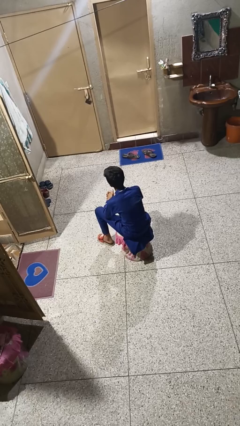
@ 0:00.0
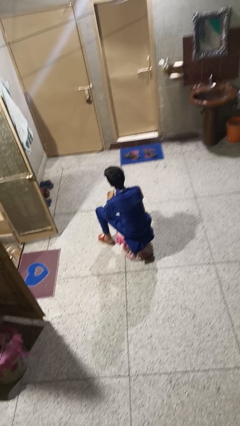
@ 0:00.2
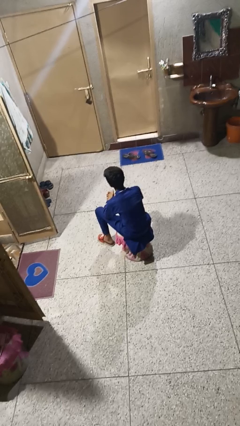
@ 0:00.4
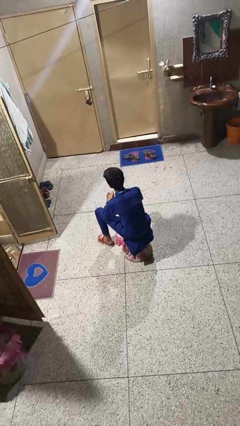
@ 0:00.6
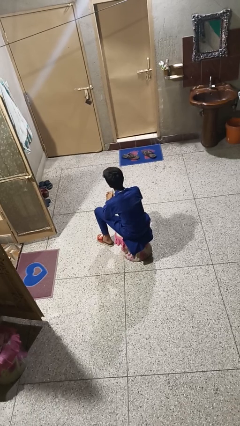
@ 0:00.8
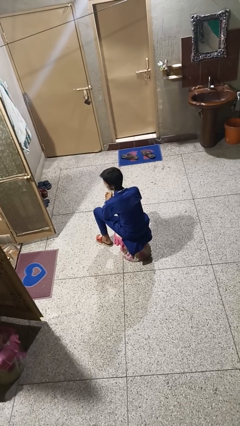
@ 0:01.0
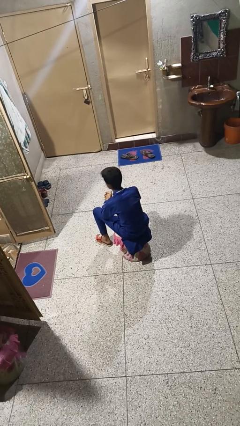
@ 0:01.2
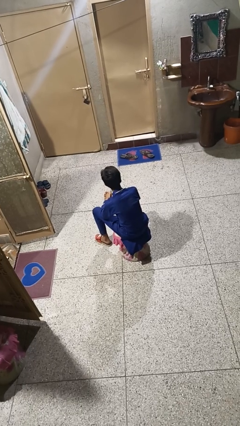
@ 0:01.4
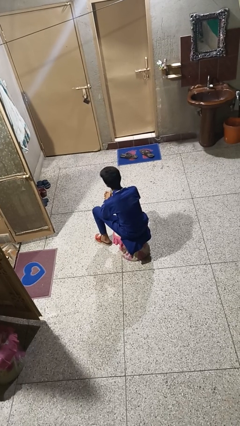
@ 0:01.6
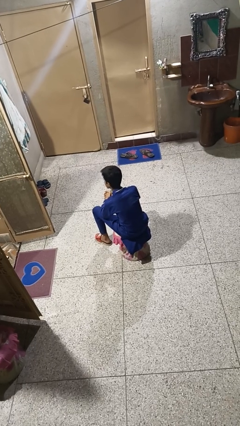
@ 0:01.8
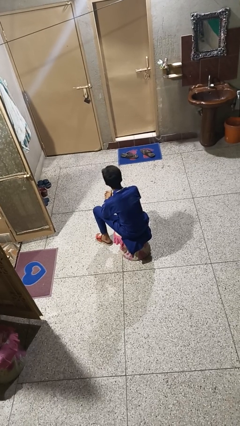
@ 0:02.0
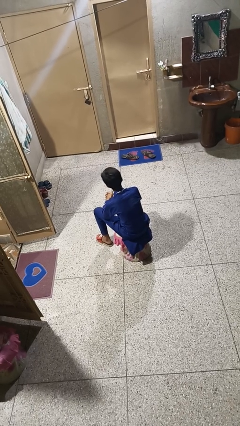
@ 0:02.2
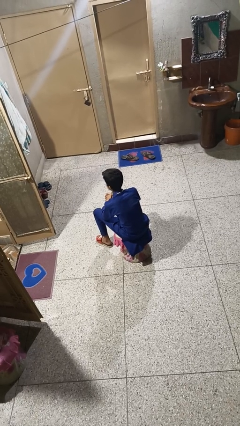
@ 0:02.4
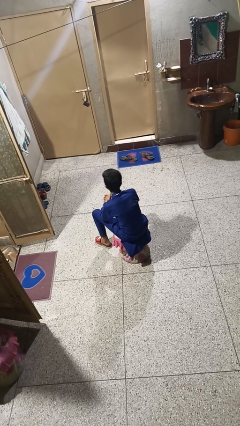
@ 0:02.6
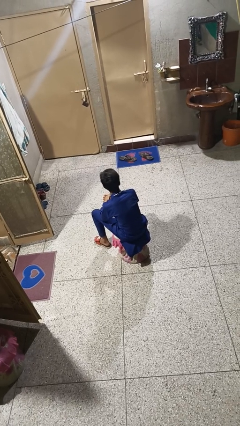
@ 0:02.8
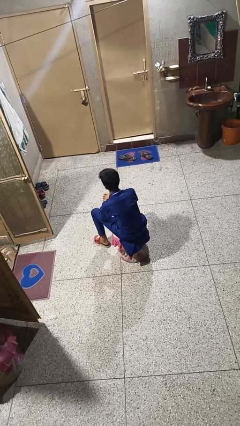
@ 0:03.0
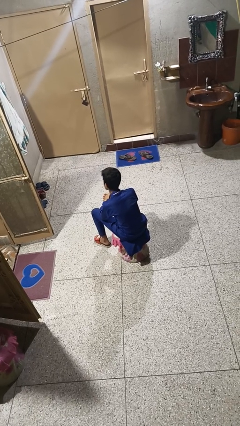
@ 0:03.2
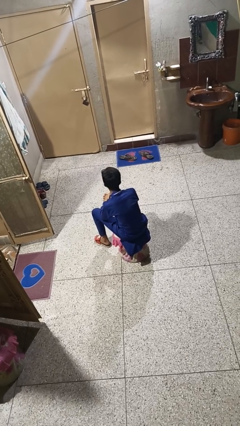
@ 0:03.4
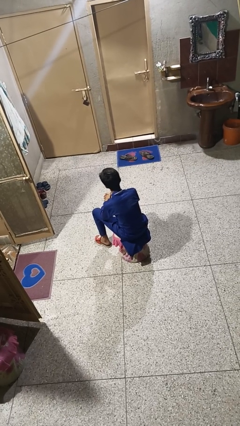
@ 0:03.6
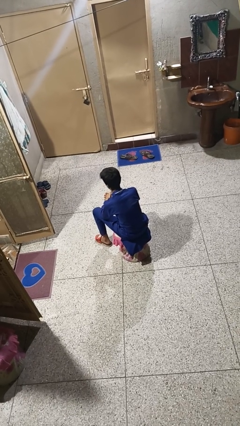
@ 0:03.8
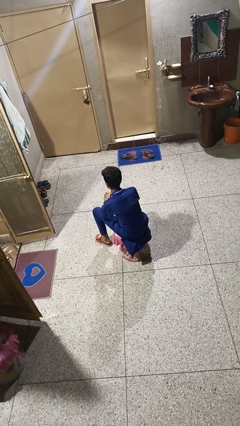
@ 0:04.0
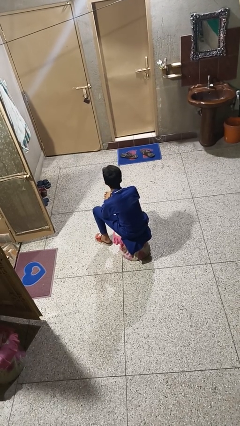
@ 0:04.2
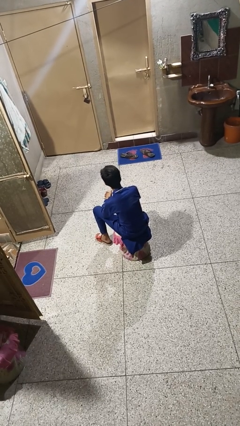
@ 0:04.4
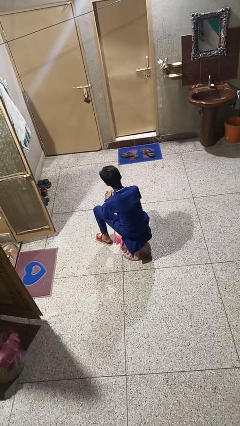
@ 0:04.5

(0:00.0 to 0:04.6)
person shakes head

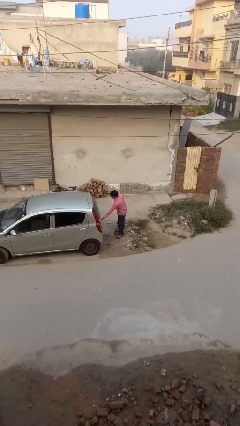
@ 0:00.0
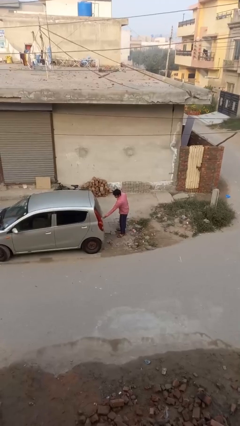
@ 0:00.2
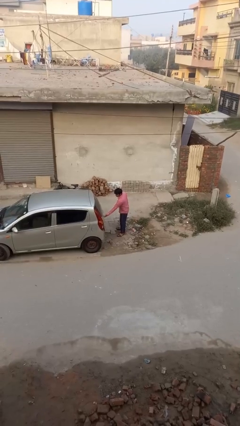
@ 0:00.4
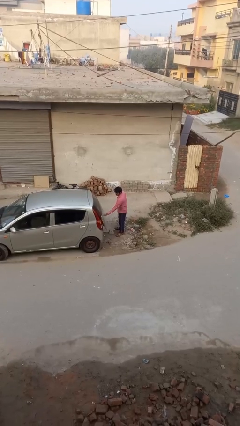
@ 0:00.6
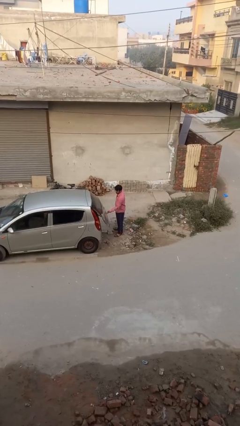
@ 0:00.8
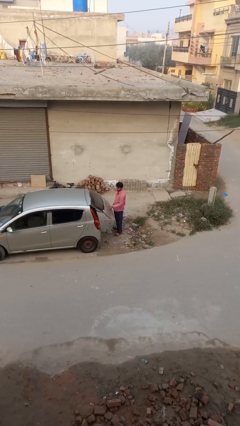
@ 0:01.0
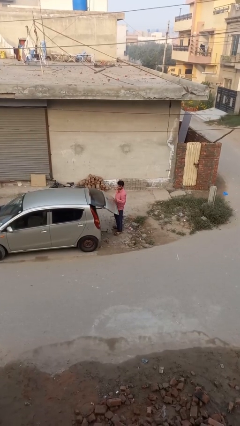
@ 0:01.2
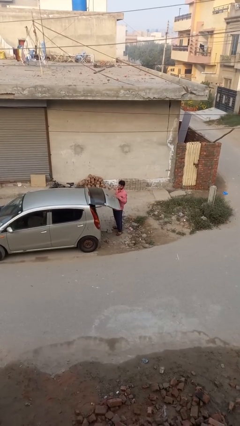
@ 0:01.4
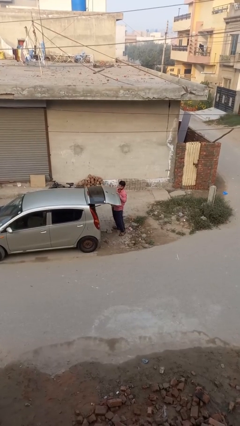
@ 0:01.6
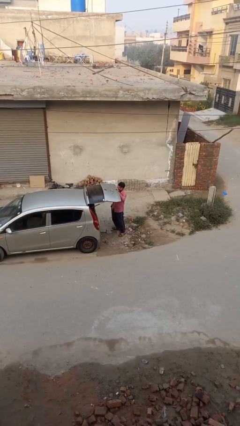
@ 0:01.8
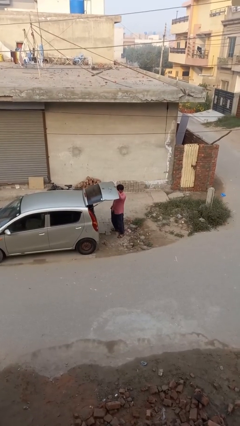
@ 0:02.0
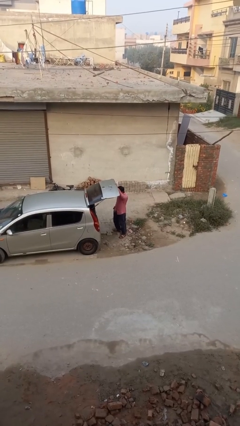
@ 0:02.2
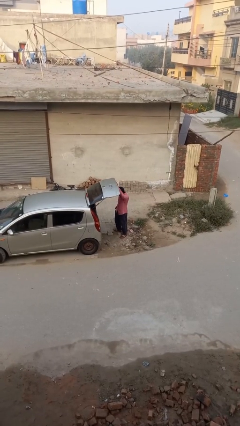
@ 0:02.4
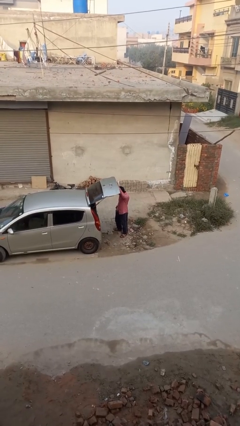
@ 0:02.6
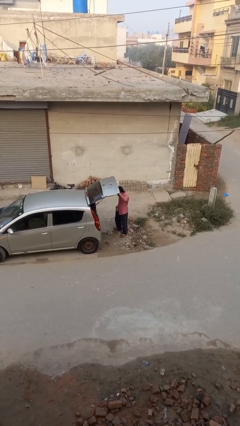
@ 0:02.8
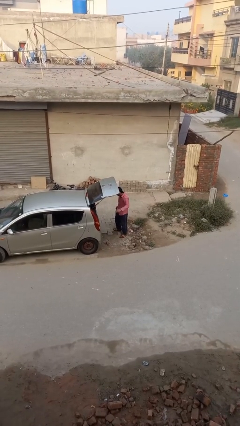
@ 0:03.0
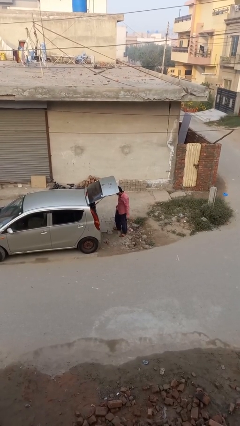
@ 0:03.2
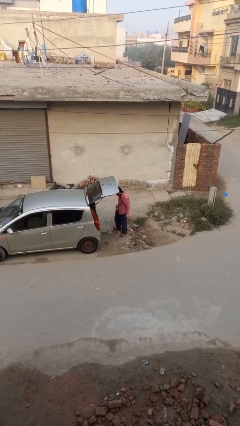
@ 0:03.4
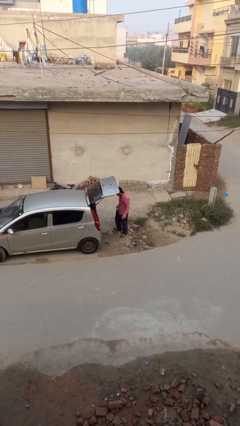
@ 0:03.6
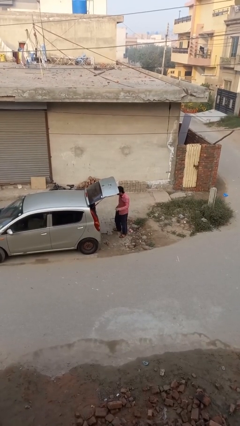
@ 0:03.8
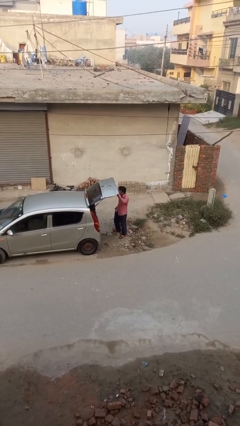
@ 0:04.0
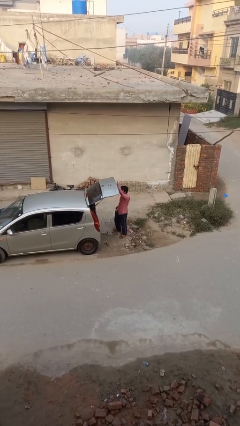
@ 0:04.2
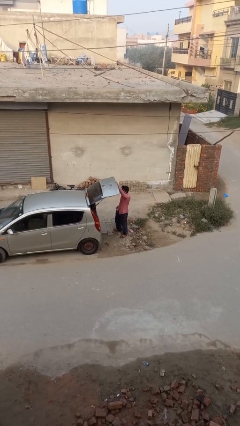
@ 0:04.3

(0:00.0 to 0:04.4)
person opens car trunk

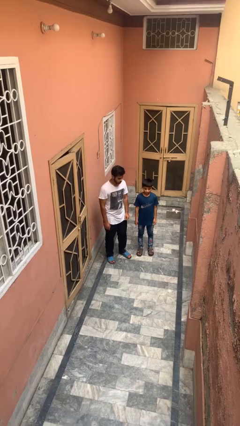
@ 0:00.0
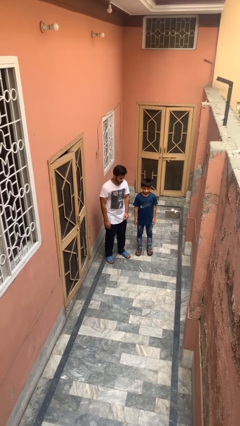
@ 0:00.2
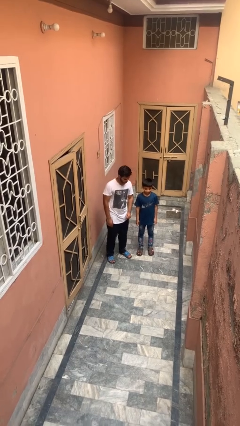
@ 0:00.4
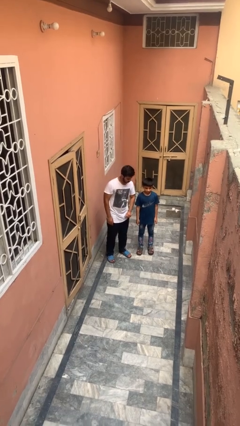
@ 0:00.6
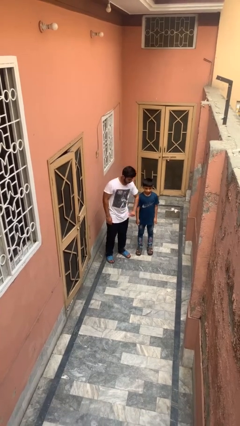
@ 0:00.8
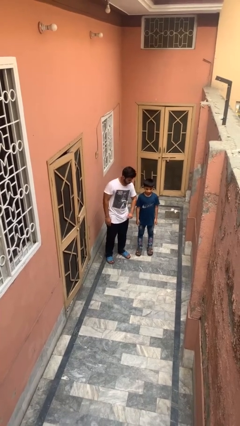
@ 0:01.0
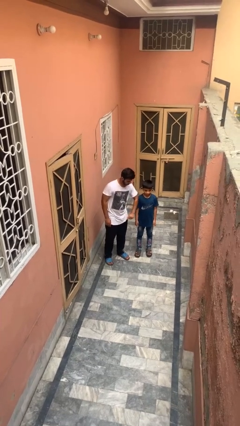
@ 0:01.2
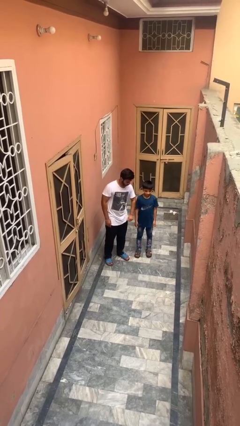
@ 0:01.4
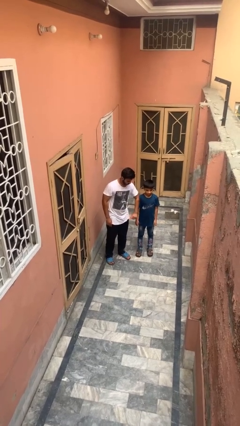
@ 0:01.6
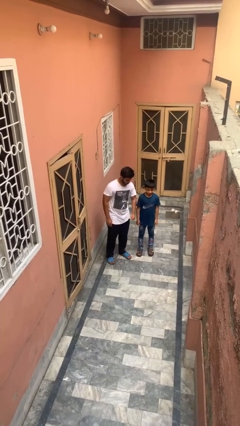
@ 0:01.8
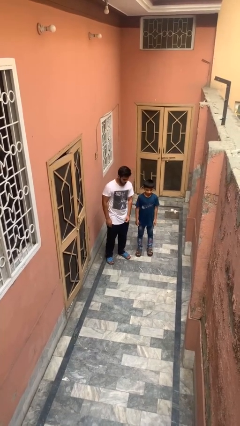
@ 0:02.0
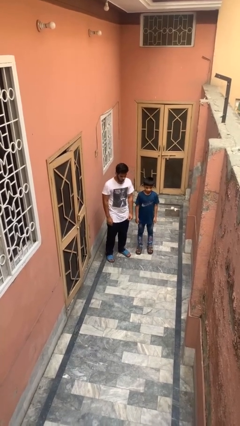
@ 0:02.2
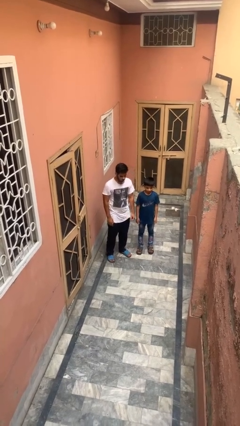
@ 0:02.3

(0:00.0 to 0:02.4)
person nudges person with elbow

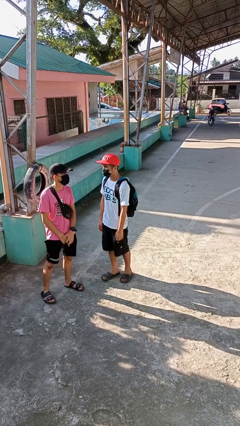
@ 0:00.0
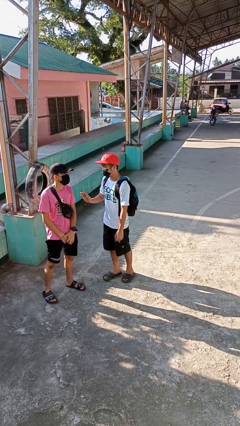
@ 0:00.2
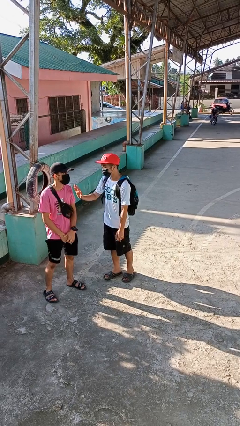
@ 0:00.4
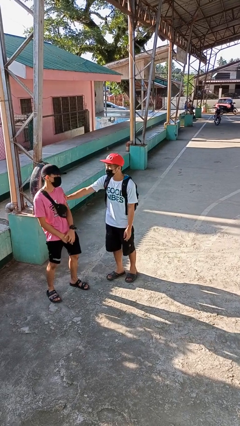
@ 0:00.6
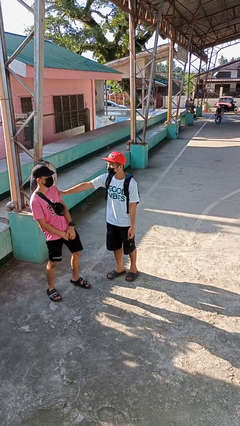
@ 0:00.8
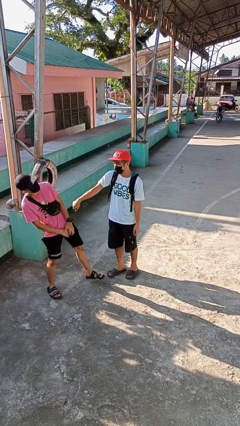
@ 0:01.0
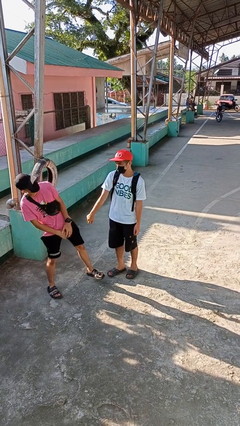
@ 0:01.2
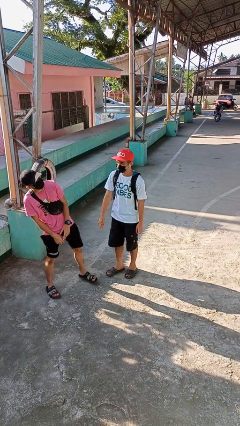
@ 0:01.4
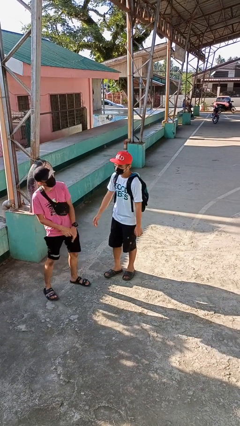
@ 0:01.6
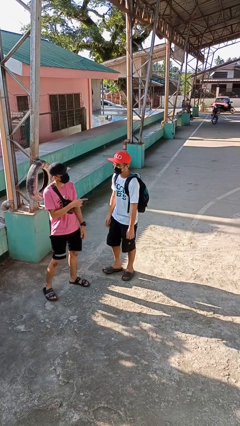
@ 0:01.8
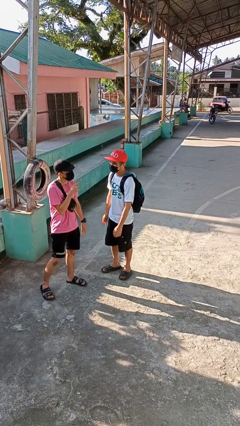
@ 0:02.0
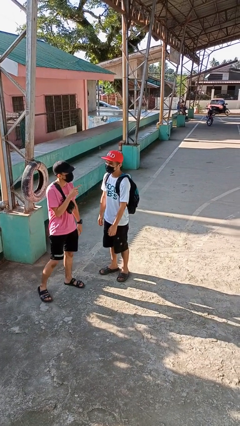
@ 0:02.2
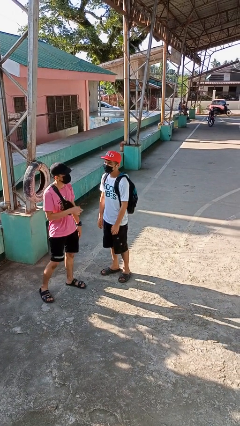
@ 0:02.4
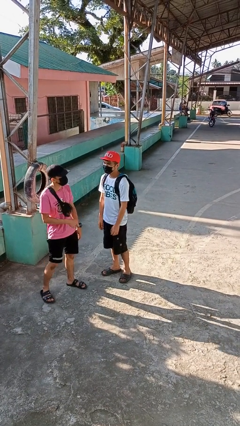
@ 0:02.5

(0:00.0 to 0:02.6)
person shoves person

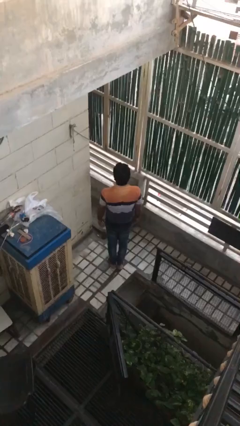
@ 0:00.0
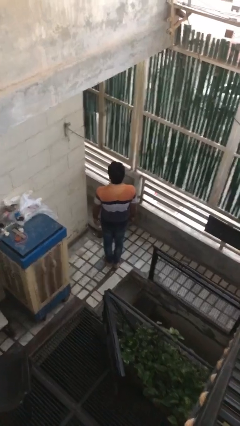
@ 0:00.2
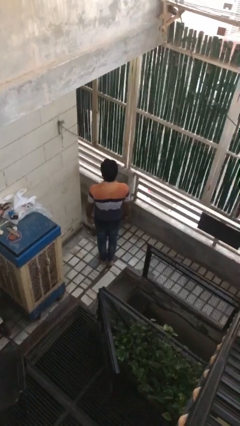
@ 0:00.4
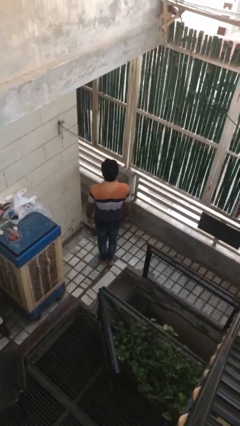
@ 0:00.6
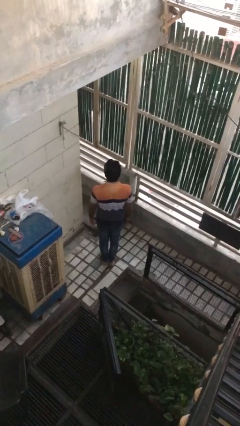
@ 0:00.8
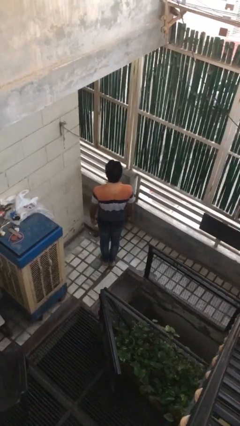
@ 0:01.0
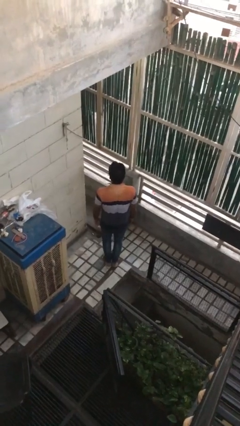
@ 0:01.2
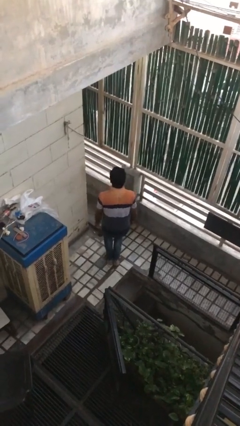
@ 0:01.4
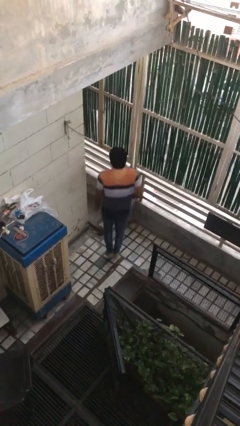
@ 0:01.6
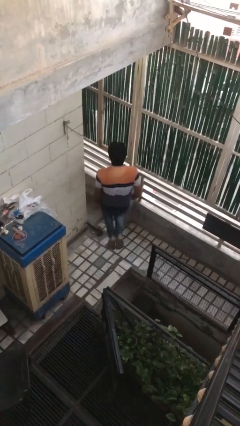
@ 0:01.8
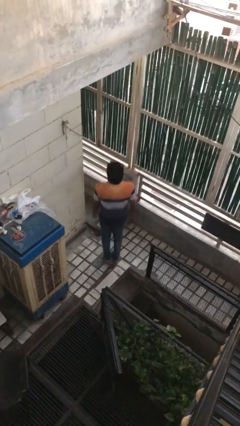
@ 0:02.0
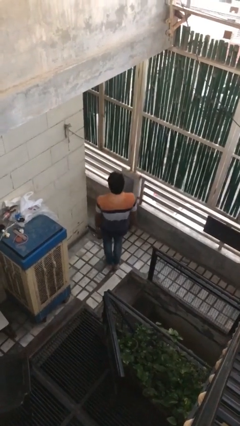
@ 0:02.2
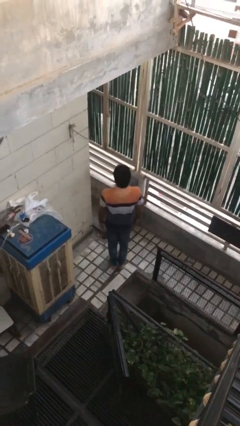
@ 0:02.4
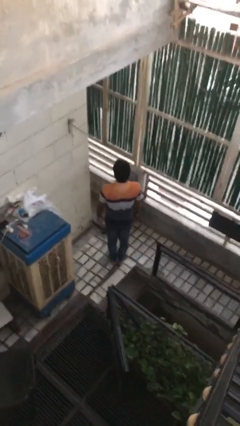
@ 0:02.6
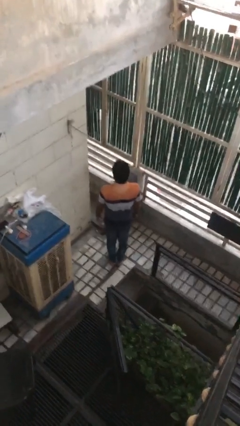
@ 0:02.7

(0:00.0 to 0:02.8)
person jumps

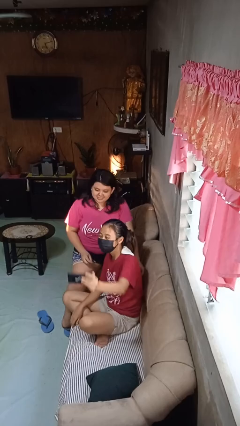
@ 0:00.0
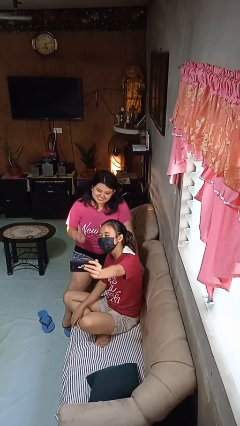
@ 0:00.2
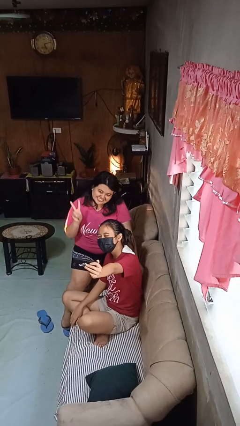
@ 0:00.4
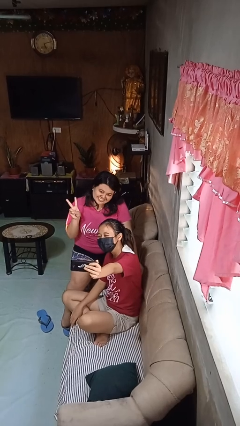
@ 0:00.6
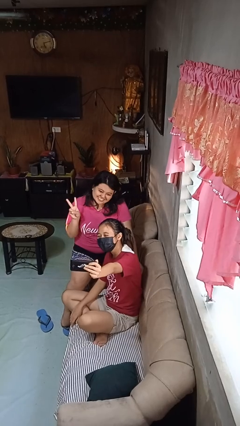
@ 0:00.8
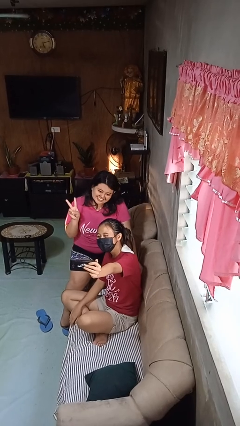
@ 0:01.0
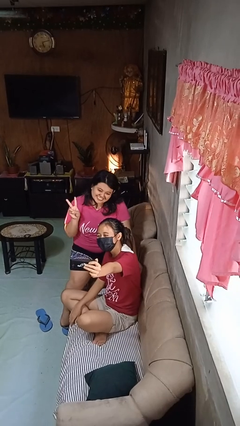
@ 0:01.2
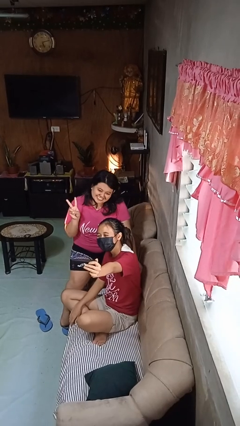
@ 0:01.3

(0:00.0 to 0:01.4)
person takes selfie with person
